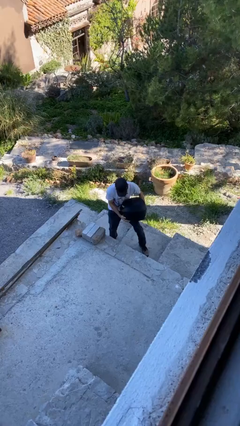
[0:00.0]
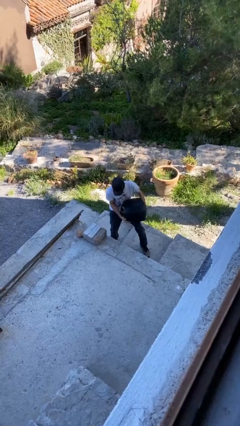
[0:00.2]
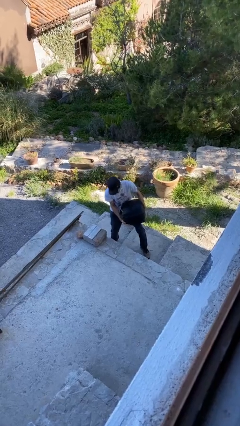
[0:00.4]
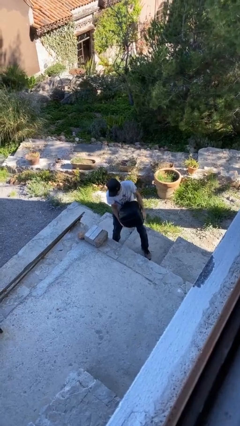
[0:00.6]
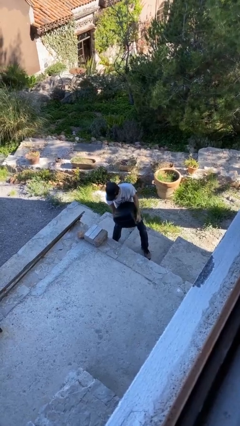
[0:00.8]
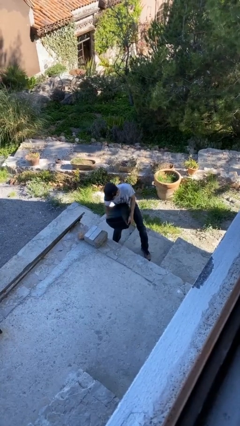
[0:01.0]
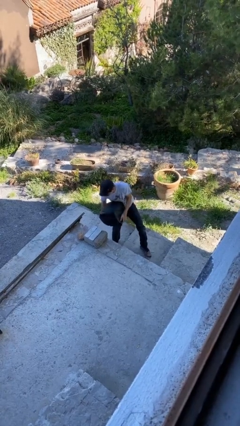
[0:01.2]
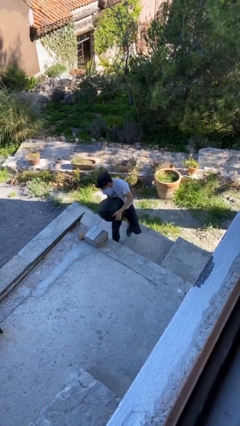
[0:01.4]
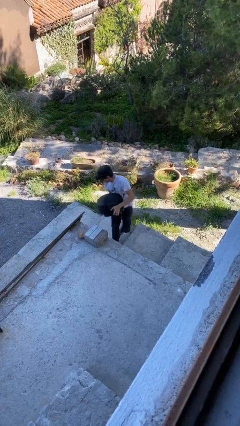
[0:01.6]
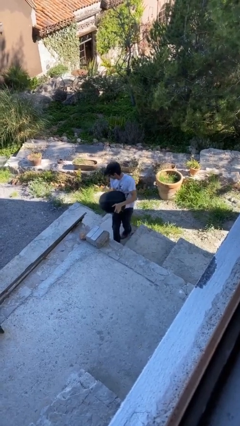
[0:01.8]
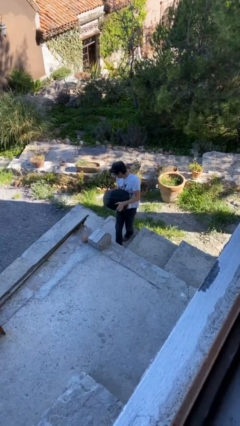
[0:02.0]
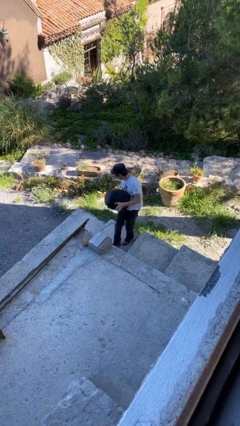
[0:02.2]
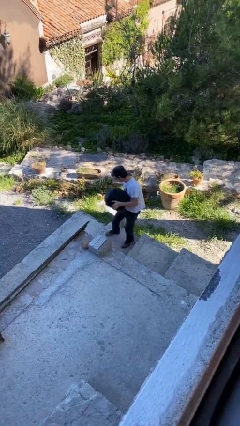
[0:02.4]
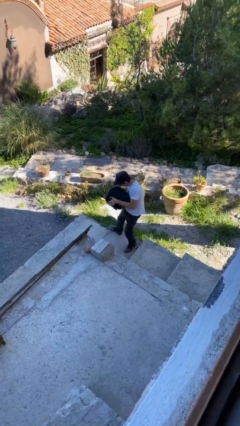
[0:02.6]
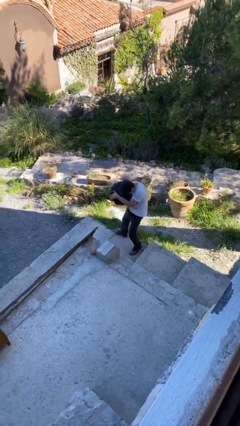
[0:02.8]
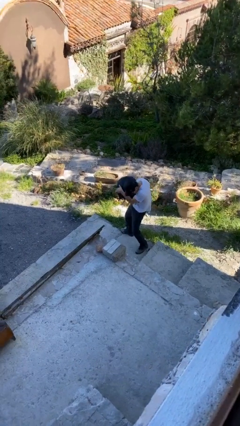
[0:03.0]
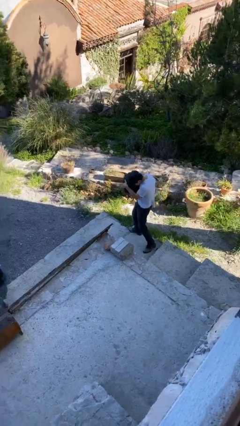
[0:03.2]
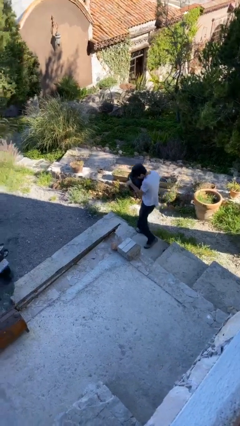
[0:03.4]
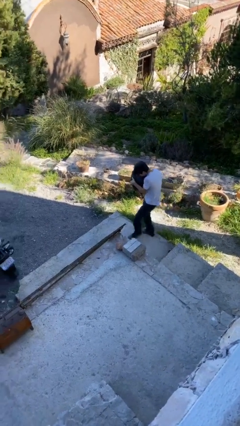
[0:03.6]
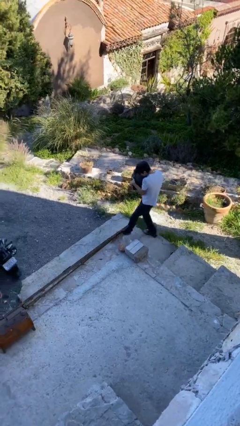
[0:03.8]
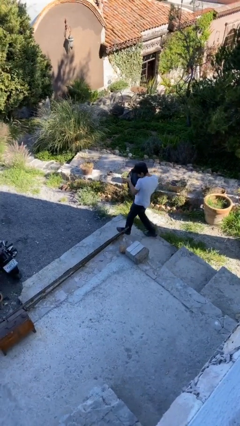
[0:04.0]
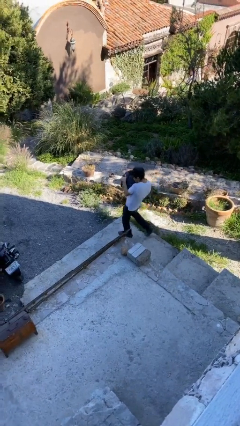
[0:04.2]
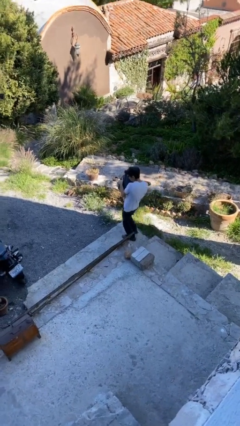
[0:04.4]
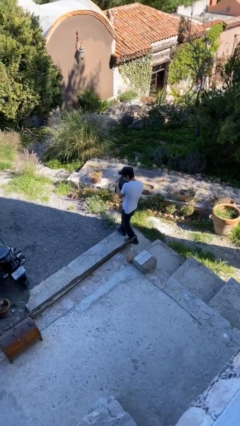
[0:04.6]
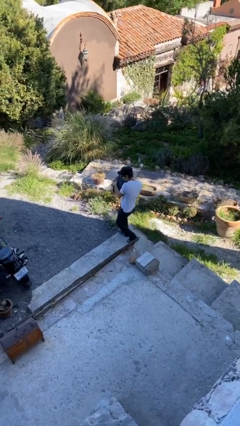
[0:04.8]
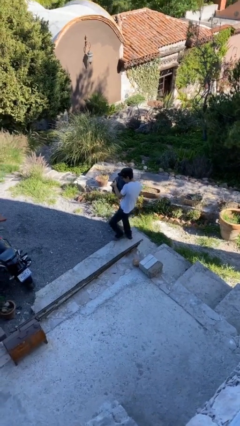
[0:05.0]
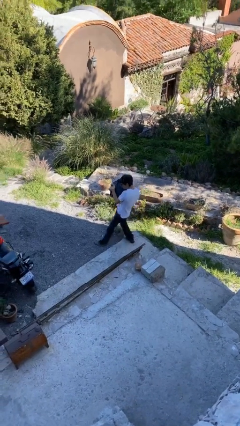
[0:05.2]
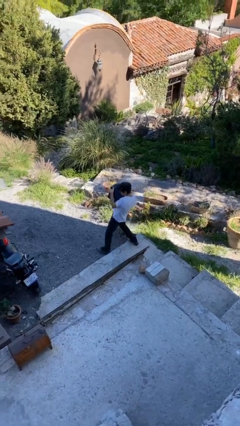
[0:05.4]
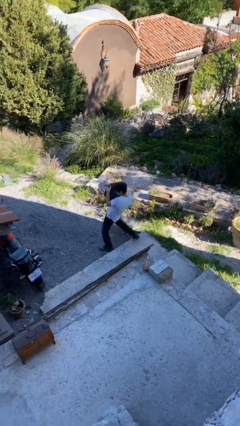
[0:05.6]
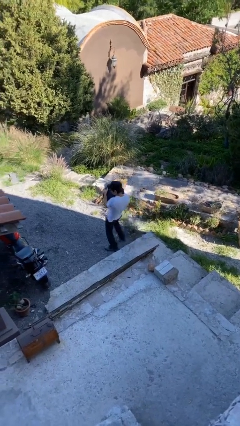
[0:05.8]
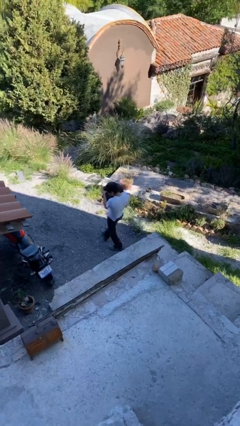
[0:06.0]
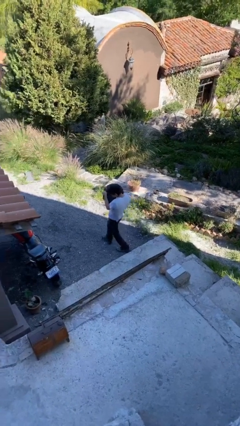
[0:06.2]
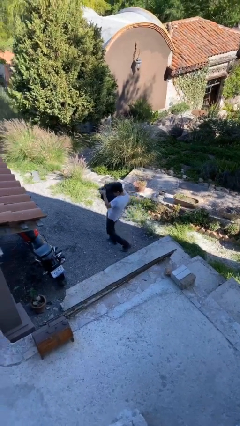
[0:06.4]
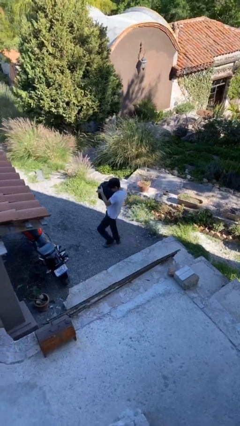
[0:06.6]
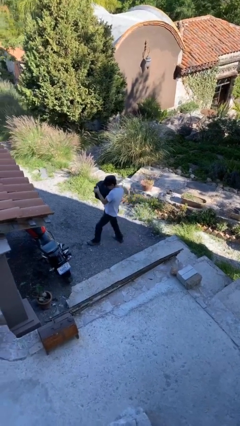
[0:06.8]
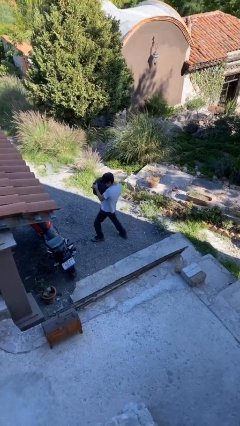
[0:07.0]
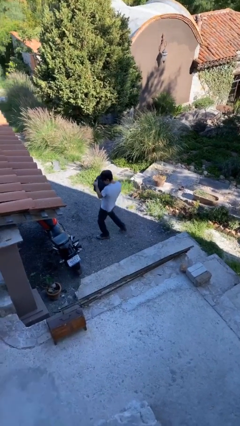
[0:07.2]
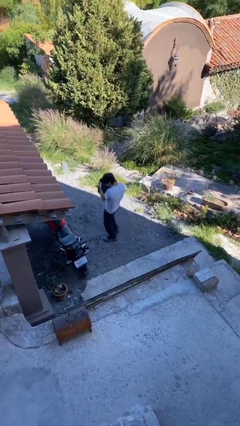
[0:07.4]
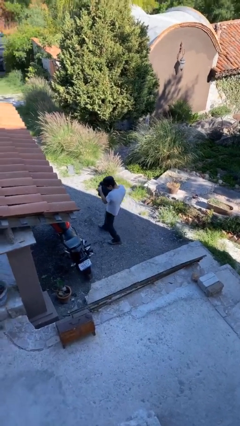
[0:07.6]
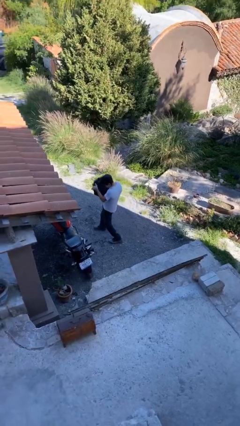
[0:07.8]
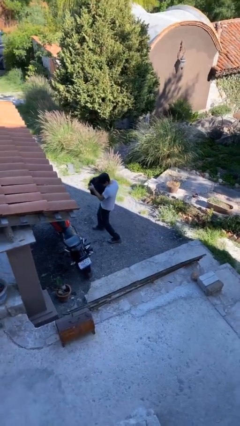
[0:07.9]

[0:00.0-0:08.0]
person carries heavy object

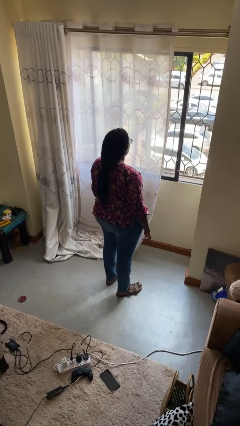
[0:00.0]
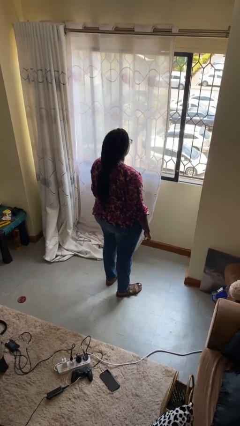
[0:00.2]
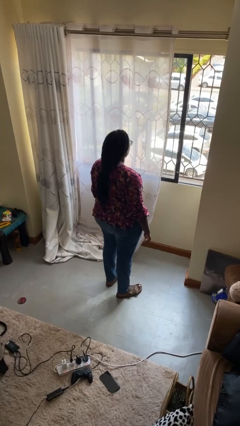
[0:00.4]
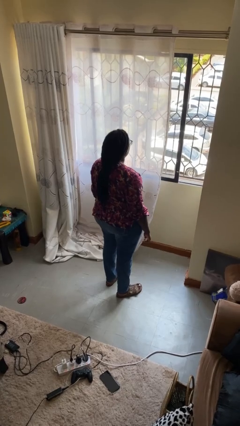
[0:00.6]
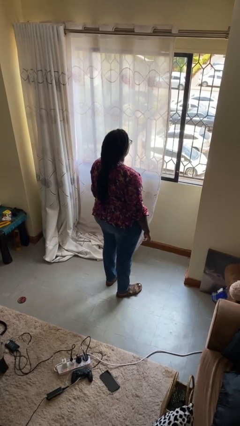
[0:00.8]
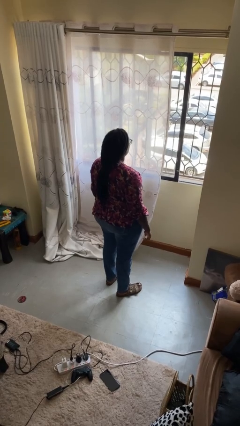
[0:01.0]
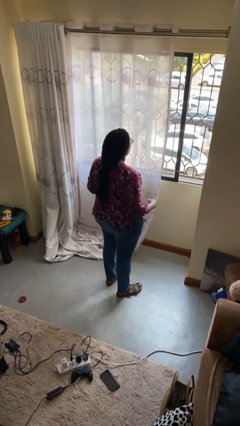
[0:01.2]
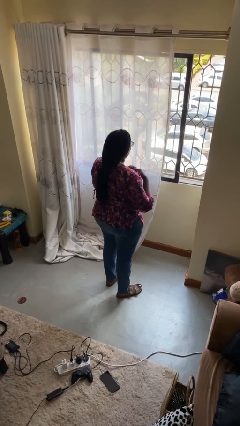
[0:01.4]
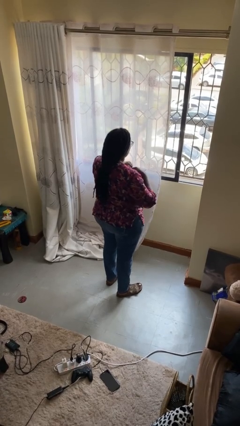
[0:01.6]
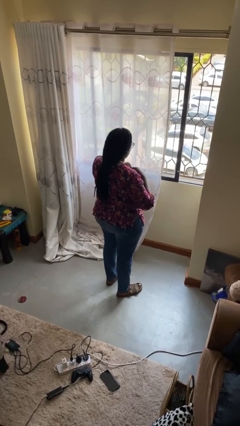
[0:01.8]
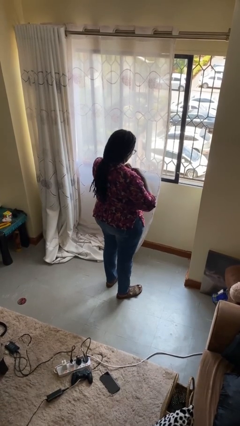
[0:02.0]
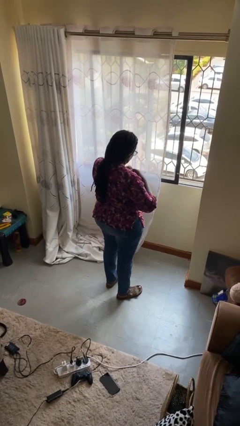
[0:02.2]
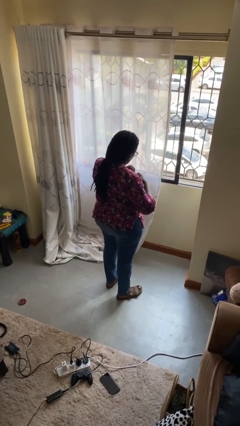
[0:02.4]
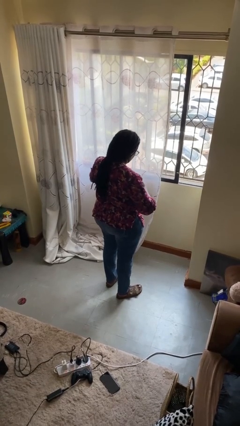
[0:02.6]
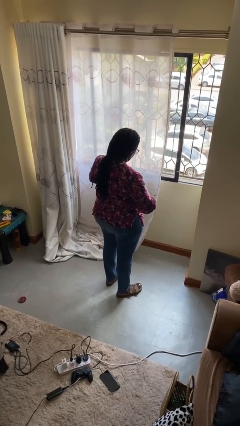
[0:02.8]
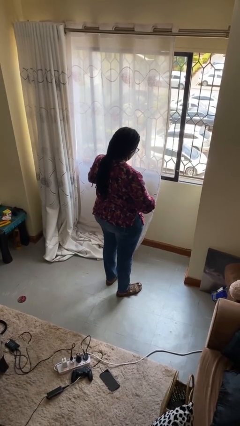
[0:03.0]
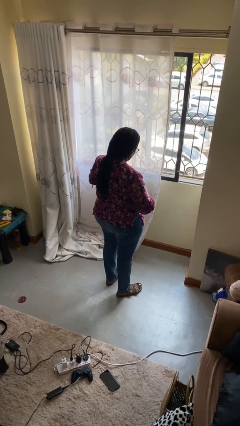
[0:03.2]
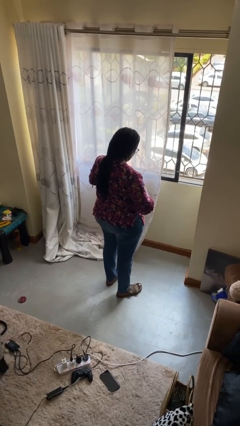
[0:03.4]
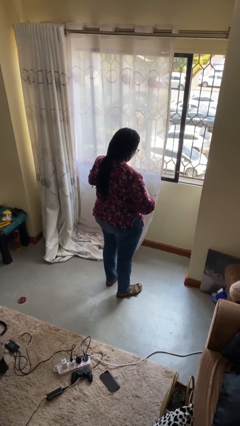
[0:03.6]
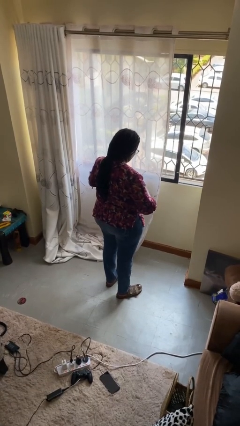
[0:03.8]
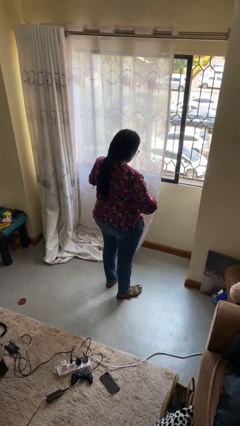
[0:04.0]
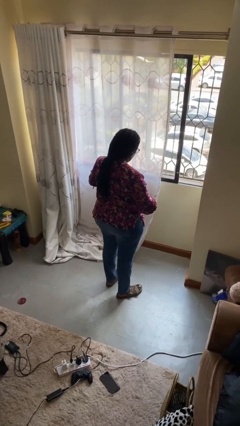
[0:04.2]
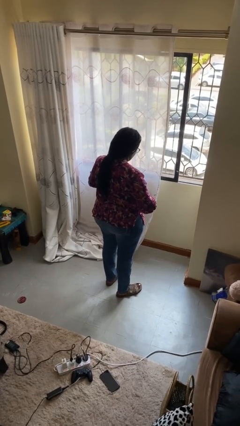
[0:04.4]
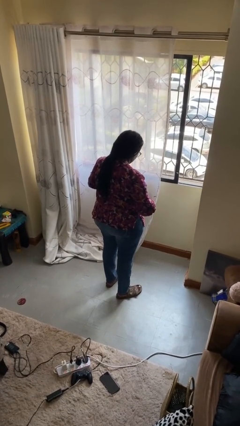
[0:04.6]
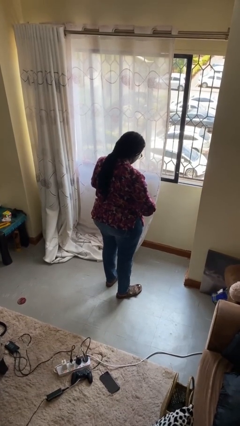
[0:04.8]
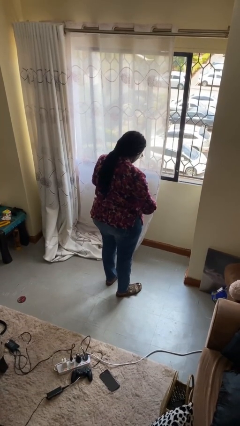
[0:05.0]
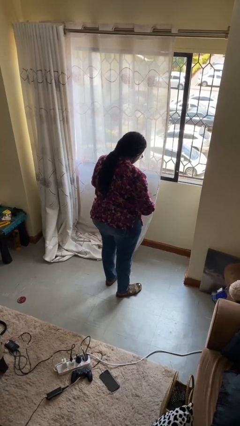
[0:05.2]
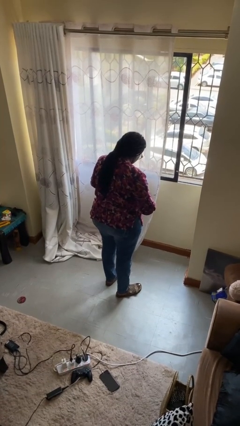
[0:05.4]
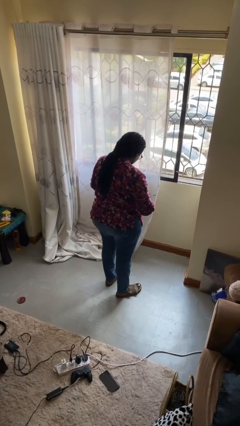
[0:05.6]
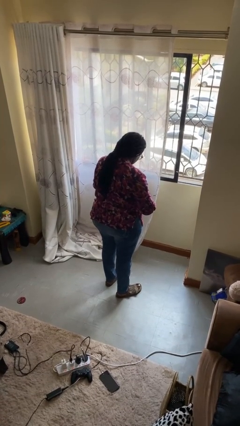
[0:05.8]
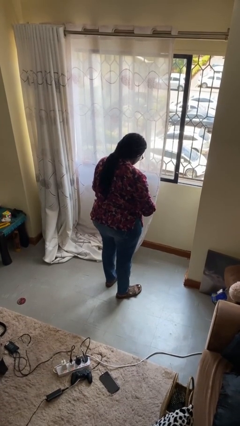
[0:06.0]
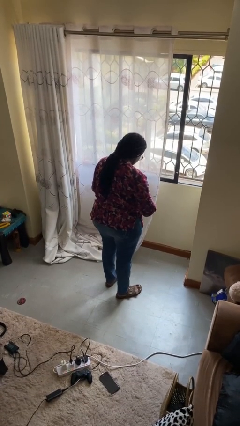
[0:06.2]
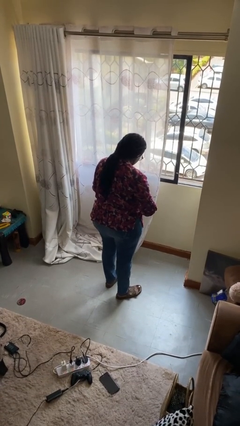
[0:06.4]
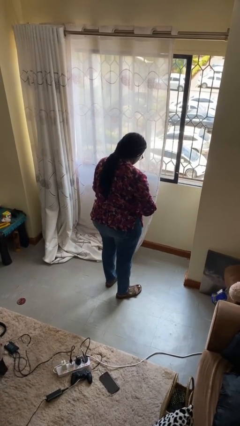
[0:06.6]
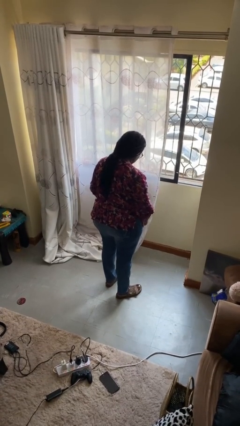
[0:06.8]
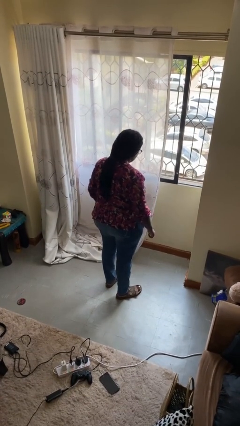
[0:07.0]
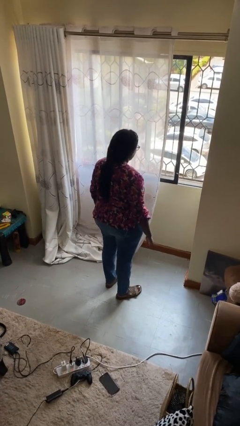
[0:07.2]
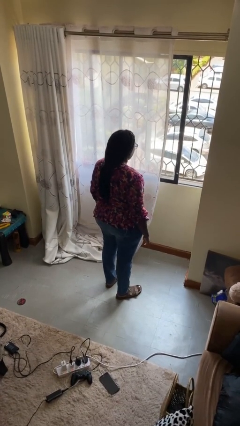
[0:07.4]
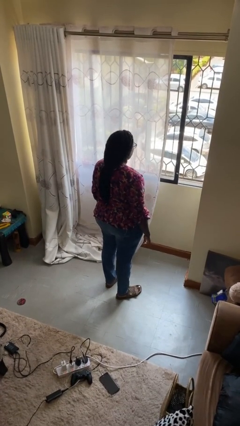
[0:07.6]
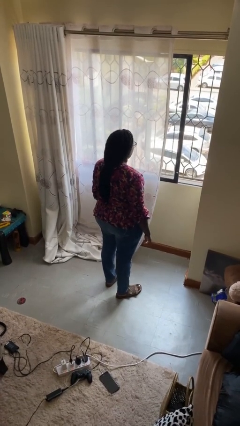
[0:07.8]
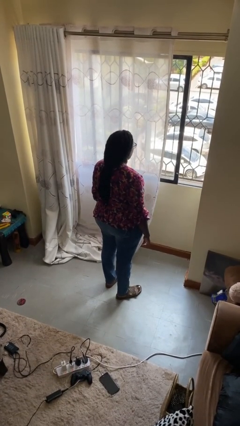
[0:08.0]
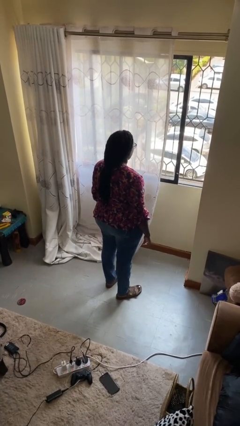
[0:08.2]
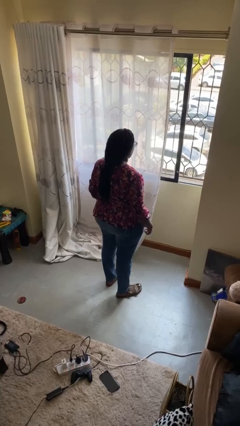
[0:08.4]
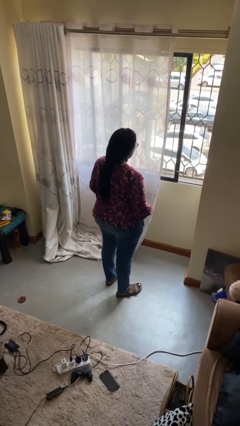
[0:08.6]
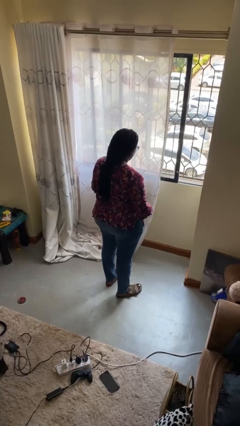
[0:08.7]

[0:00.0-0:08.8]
person unbuttons shirt

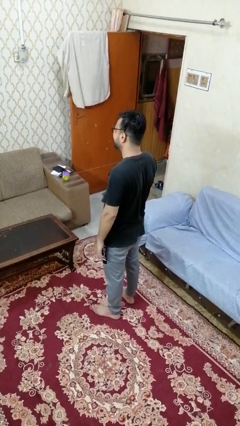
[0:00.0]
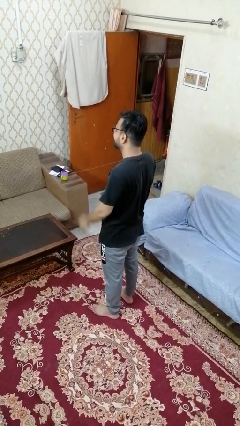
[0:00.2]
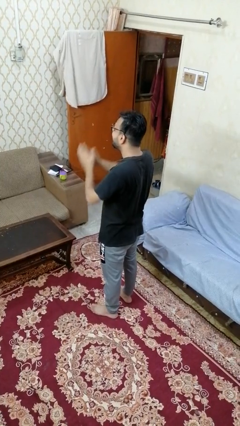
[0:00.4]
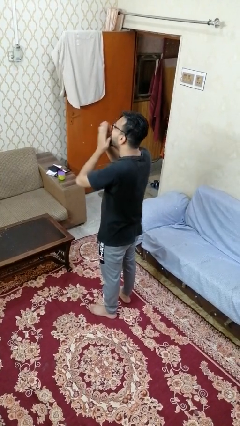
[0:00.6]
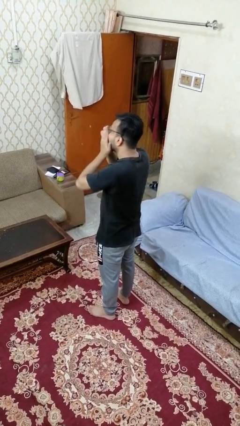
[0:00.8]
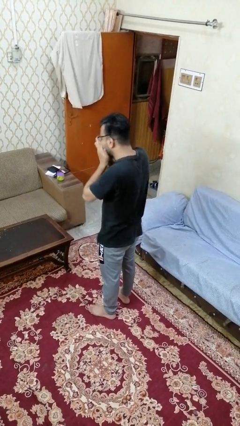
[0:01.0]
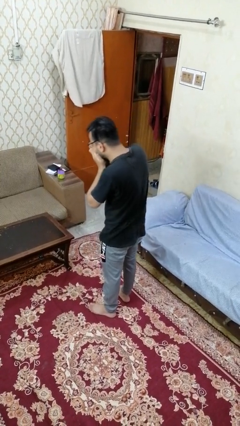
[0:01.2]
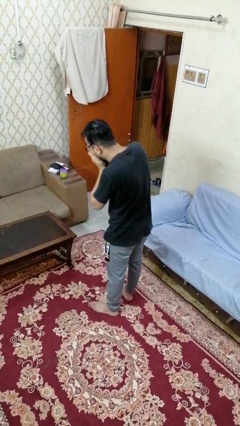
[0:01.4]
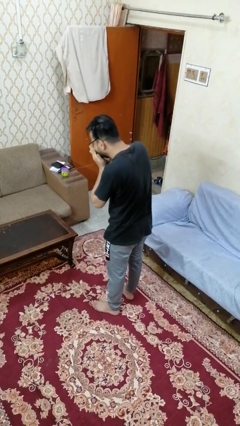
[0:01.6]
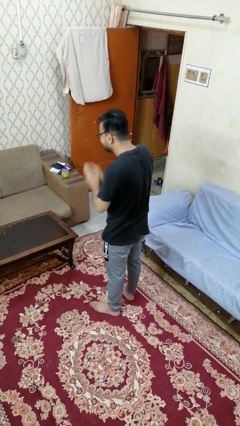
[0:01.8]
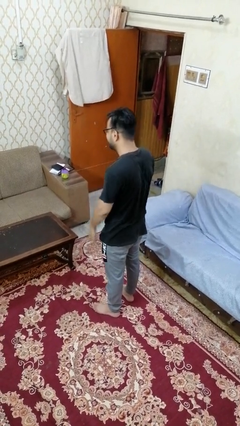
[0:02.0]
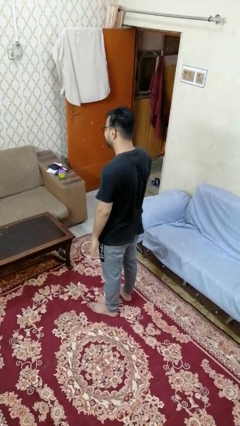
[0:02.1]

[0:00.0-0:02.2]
person sneezes into hand
